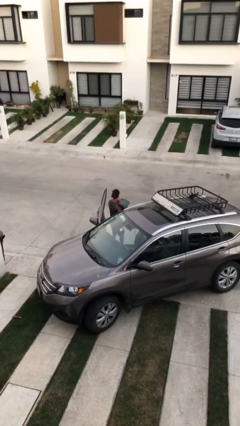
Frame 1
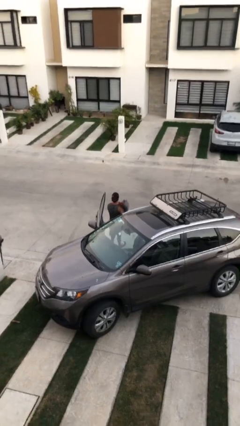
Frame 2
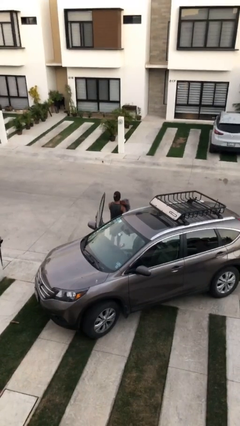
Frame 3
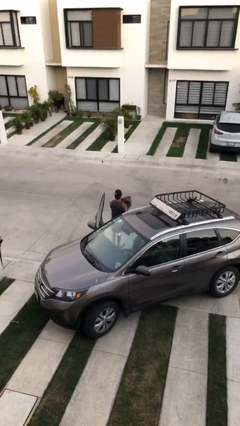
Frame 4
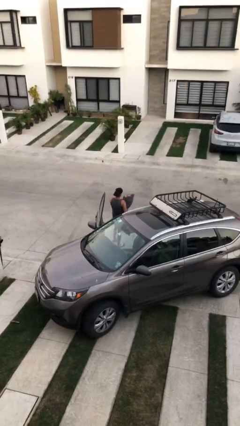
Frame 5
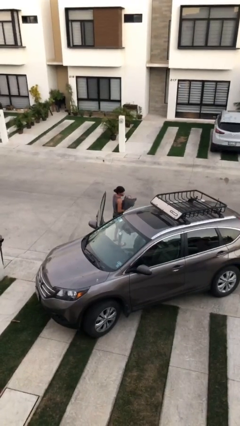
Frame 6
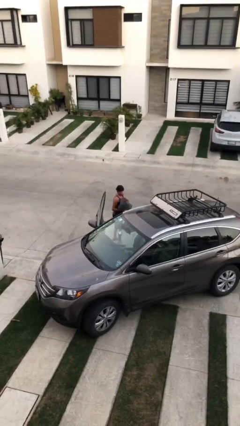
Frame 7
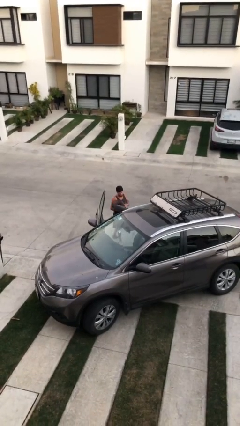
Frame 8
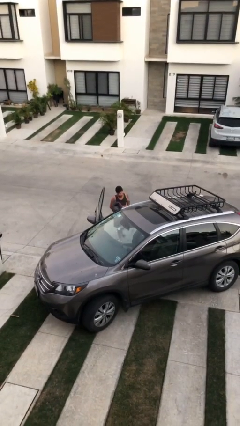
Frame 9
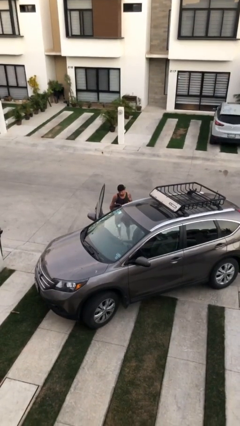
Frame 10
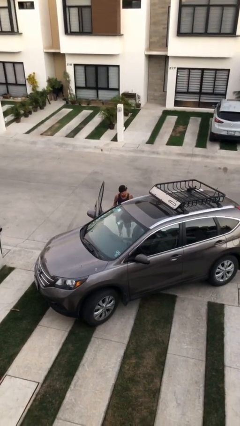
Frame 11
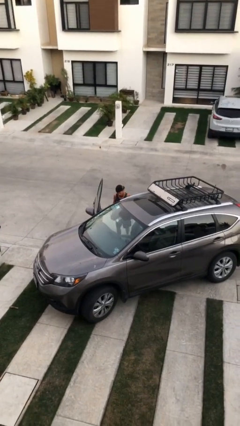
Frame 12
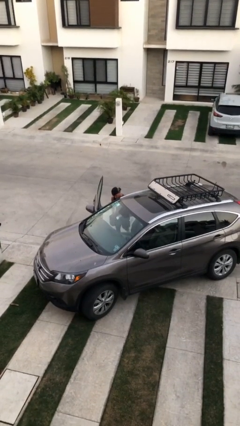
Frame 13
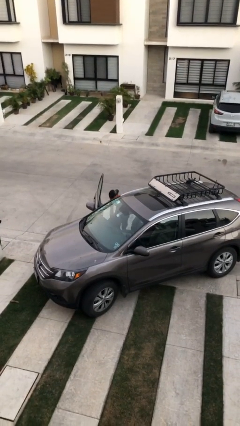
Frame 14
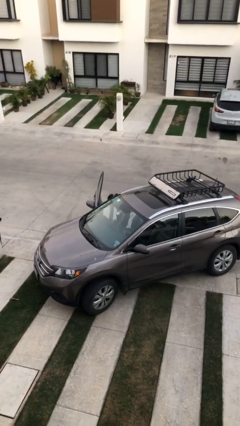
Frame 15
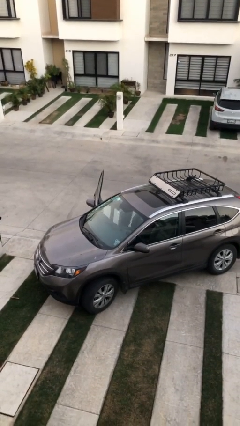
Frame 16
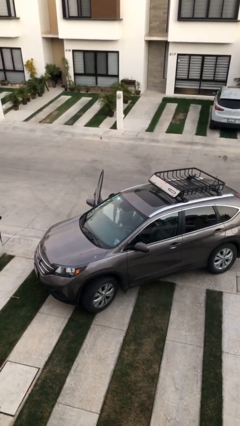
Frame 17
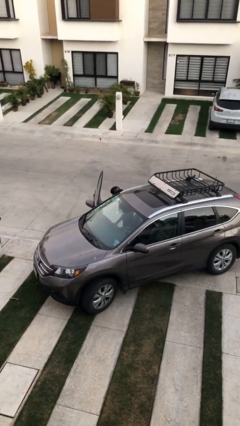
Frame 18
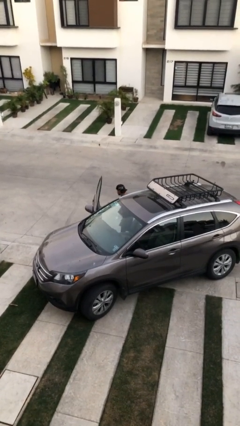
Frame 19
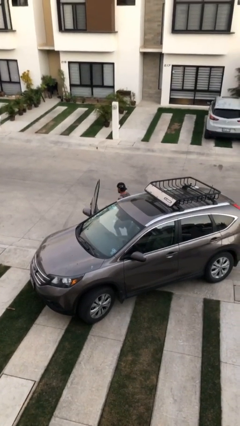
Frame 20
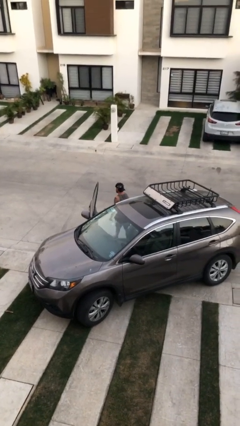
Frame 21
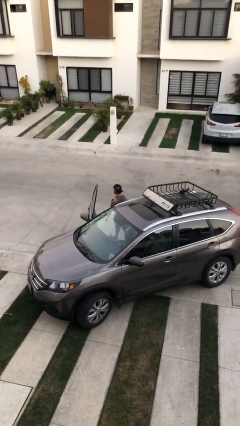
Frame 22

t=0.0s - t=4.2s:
person loads car

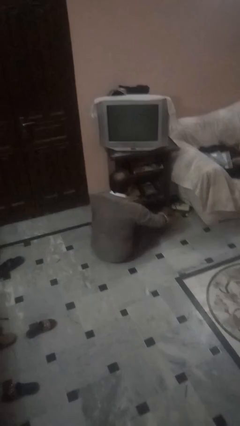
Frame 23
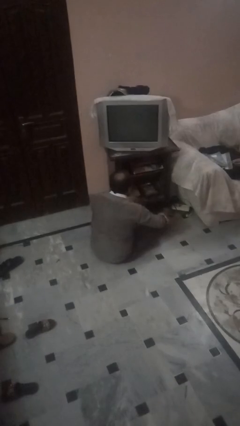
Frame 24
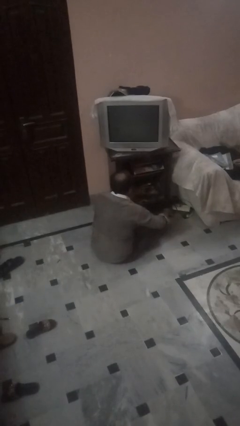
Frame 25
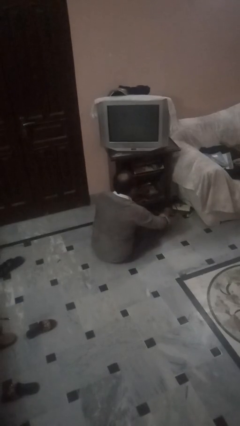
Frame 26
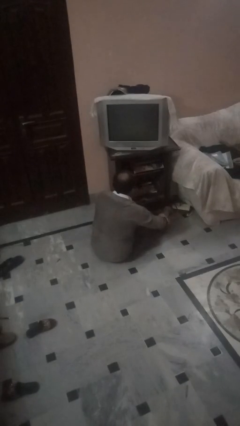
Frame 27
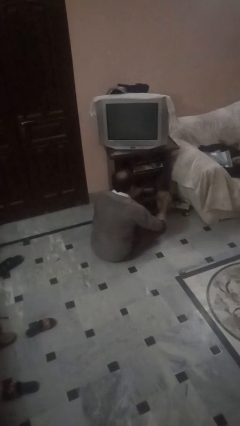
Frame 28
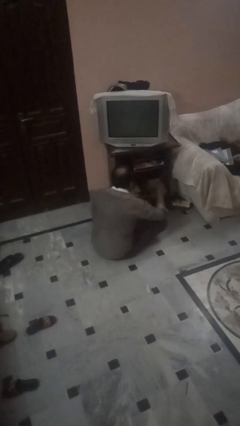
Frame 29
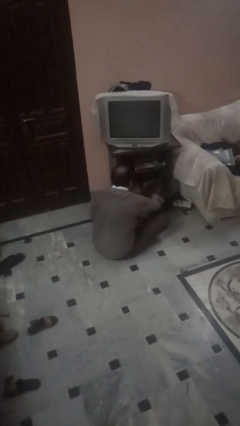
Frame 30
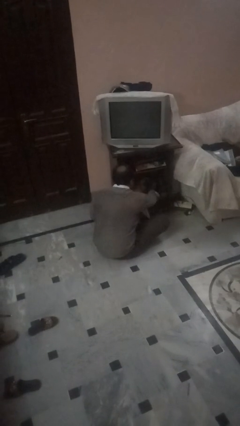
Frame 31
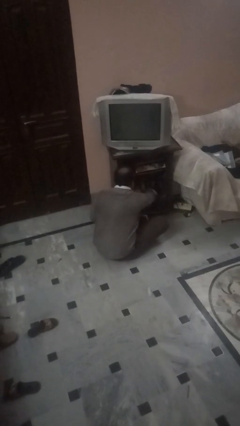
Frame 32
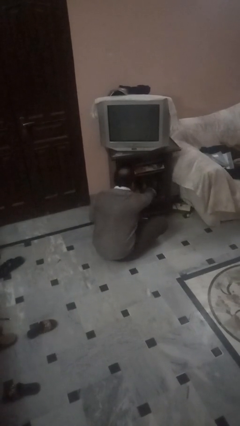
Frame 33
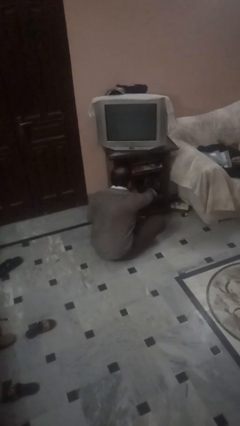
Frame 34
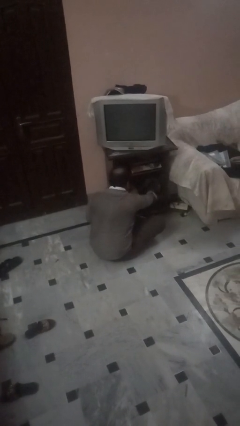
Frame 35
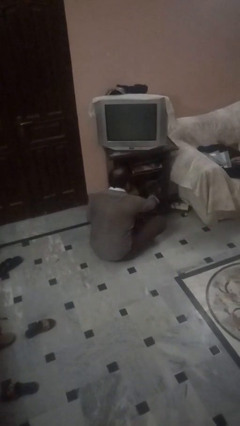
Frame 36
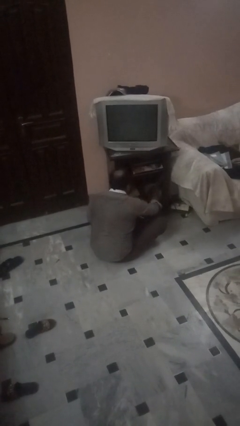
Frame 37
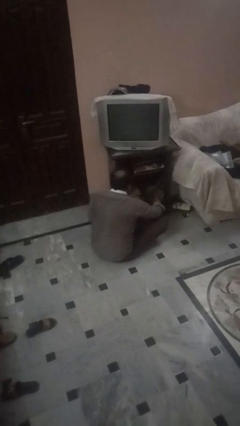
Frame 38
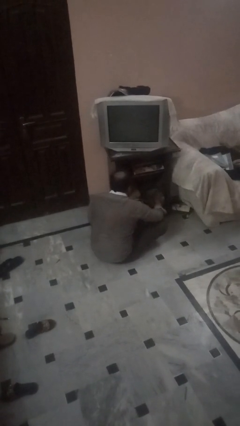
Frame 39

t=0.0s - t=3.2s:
person dusts furniture

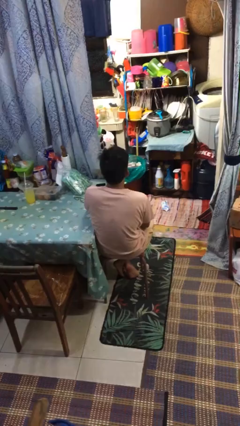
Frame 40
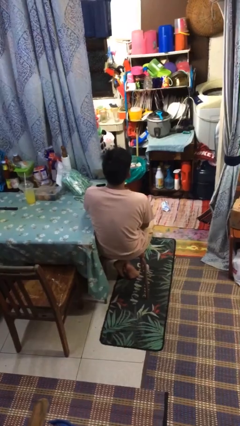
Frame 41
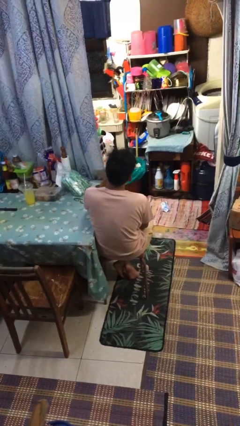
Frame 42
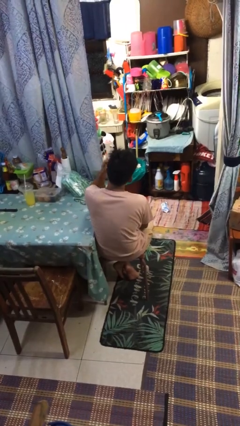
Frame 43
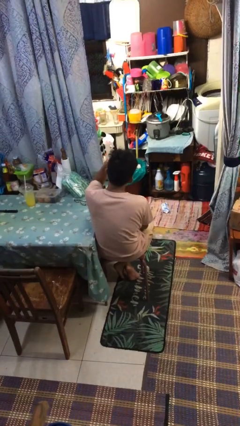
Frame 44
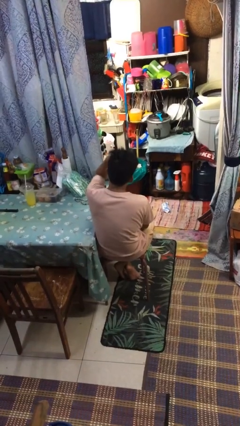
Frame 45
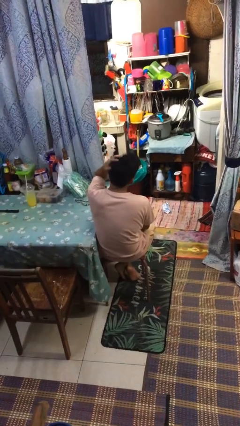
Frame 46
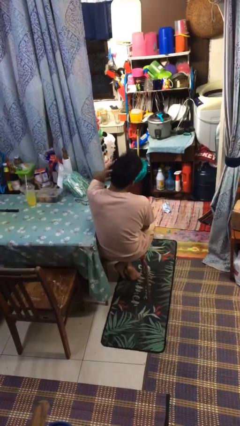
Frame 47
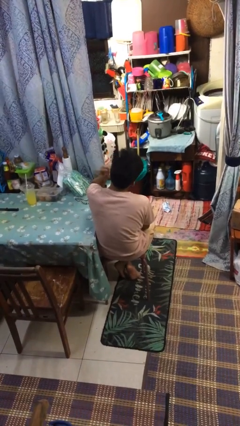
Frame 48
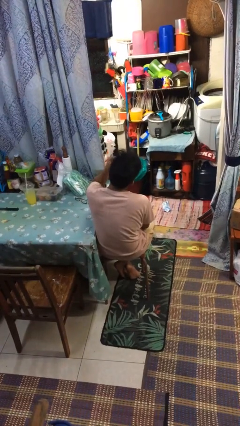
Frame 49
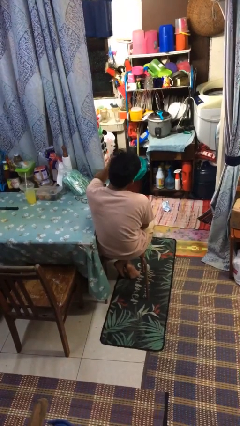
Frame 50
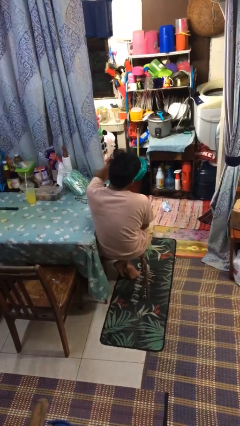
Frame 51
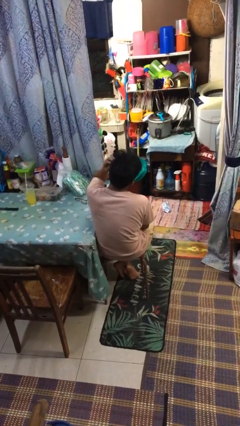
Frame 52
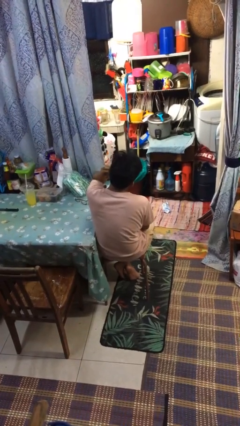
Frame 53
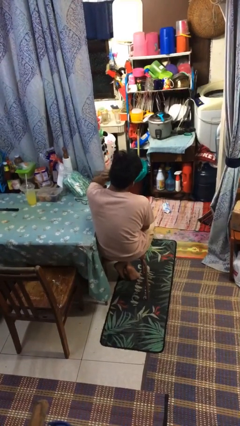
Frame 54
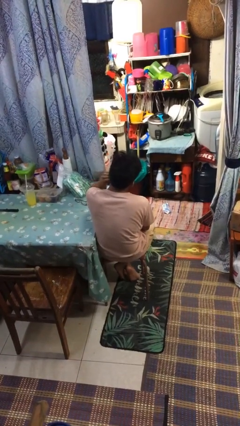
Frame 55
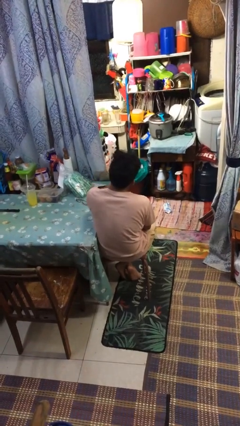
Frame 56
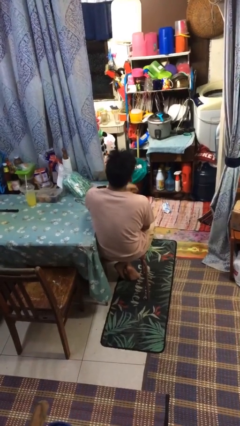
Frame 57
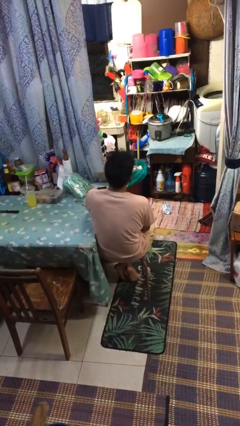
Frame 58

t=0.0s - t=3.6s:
person strokes hair

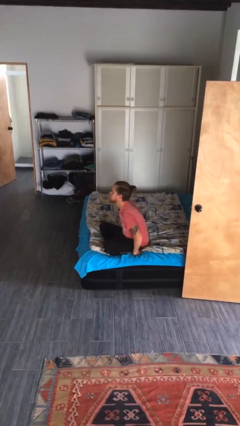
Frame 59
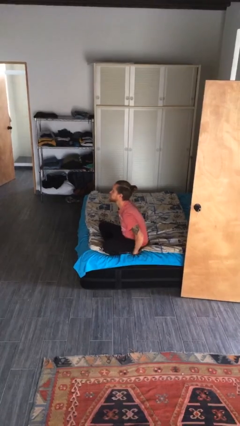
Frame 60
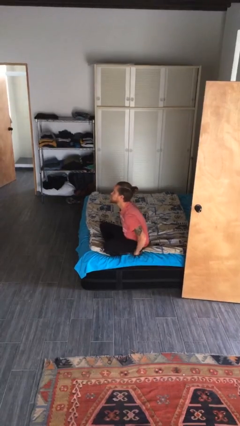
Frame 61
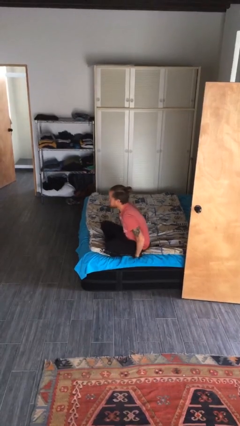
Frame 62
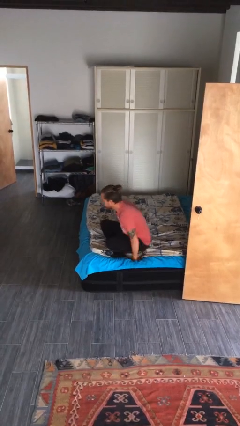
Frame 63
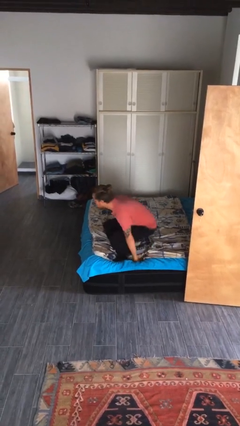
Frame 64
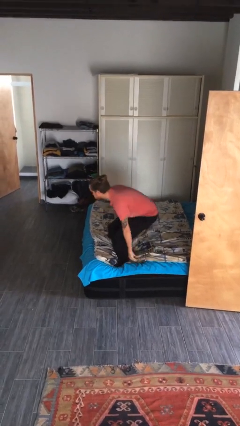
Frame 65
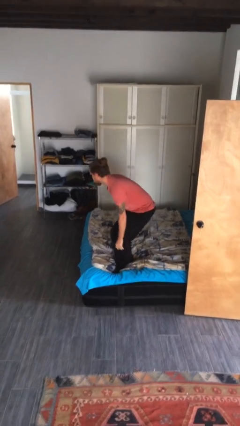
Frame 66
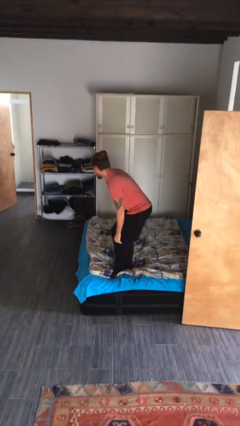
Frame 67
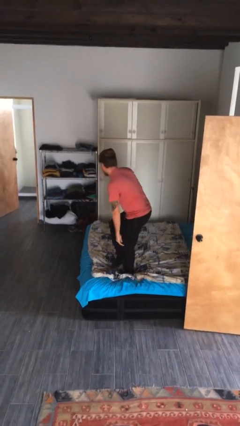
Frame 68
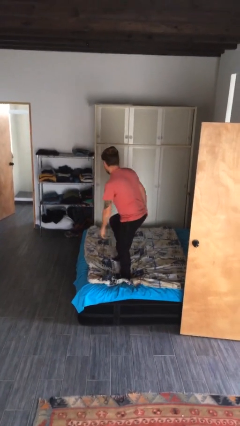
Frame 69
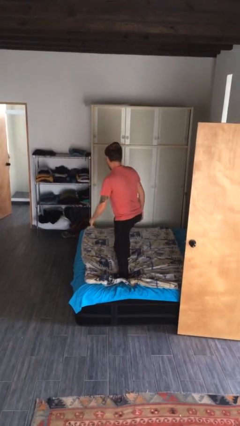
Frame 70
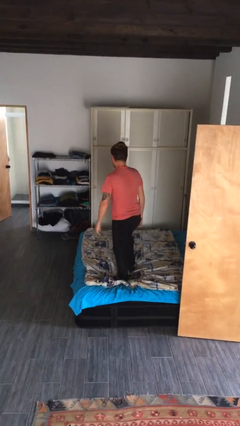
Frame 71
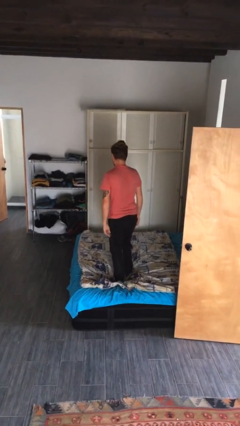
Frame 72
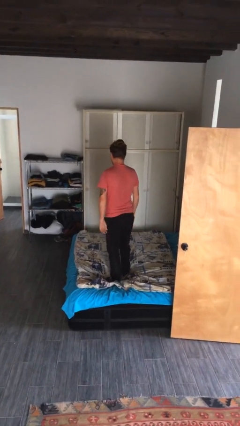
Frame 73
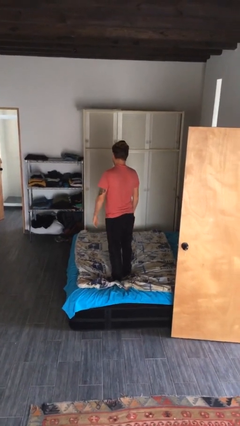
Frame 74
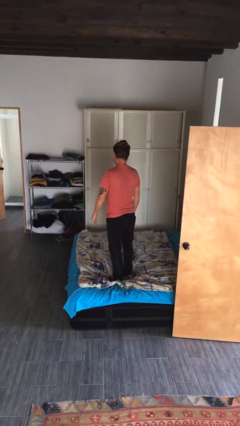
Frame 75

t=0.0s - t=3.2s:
person stands up from floor

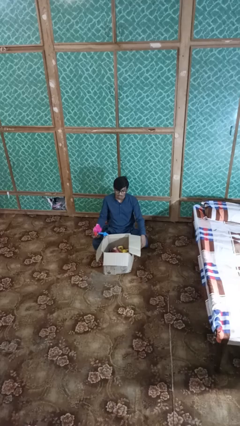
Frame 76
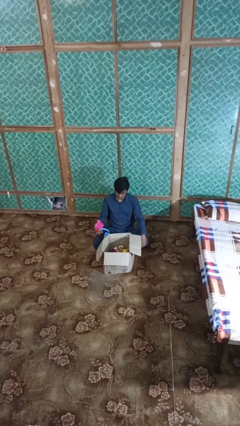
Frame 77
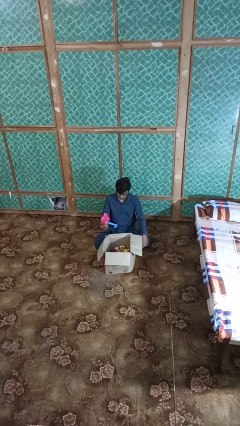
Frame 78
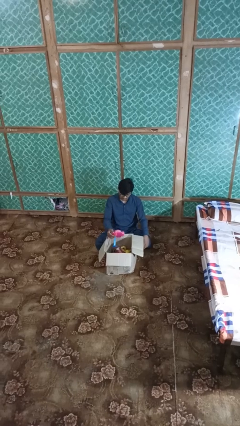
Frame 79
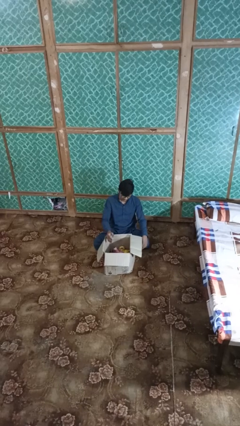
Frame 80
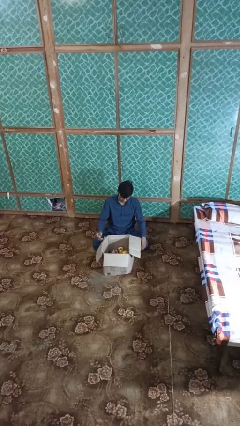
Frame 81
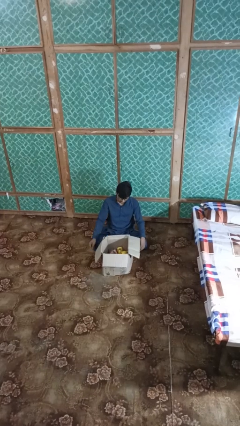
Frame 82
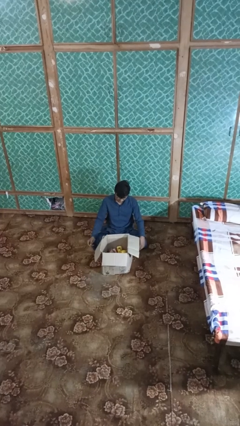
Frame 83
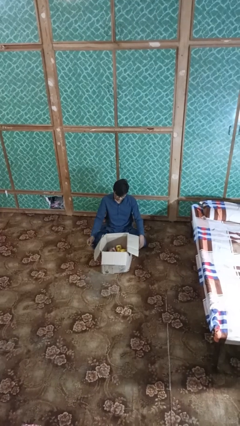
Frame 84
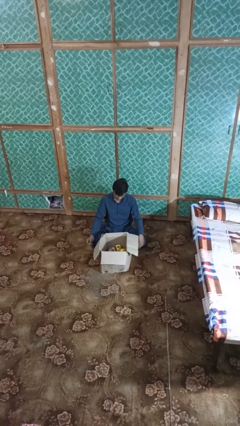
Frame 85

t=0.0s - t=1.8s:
person puts object into box

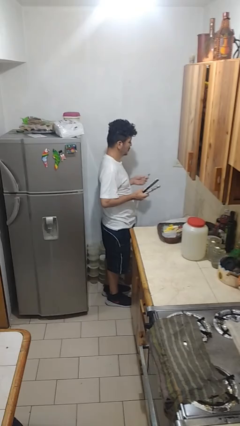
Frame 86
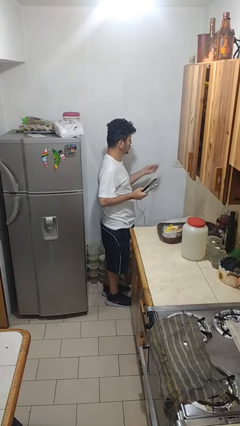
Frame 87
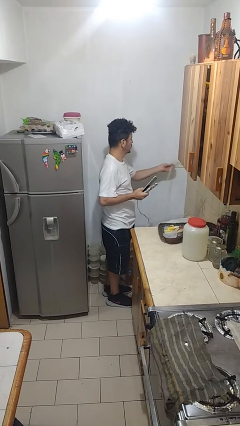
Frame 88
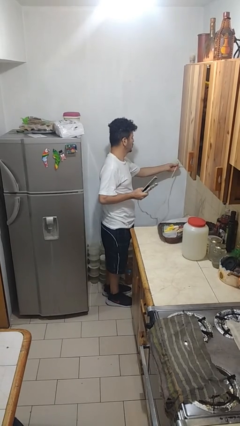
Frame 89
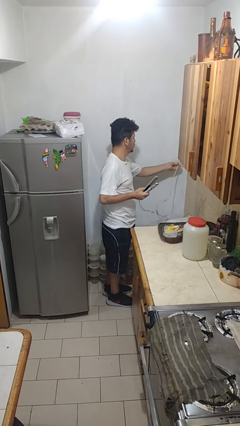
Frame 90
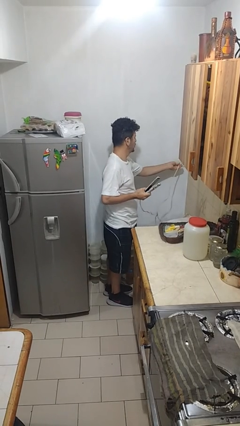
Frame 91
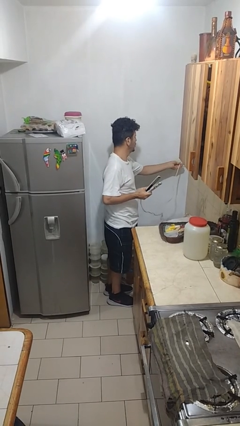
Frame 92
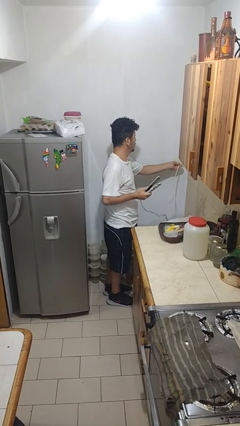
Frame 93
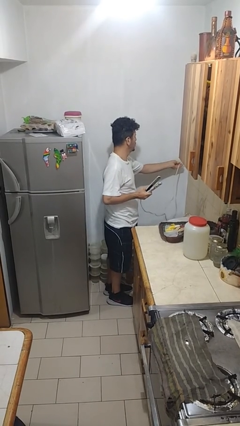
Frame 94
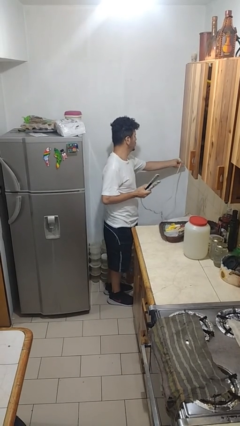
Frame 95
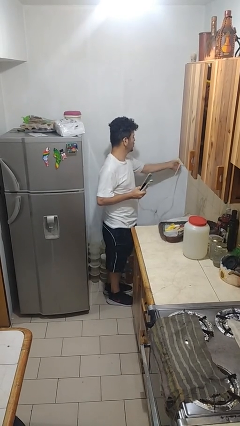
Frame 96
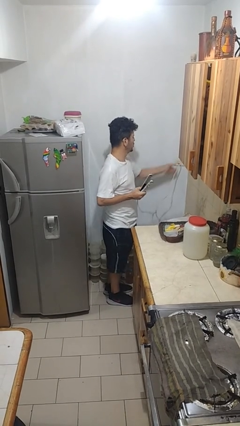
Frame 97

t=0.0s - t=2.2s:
person plugs into electrical socket
